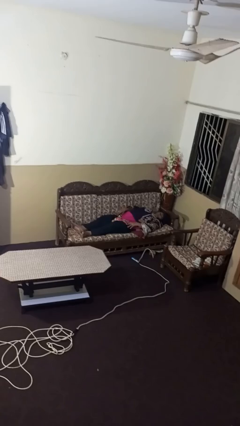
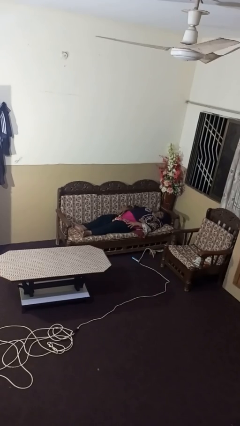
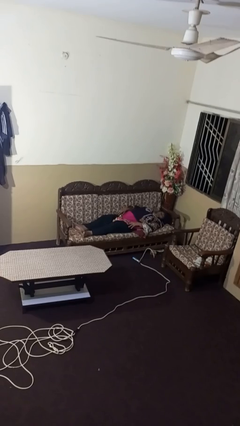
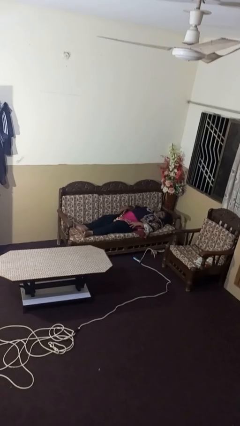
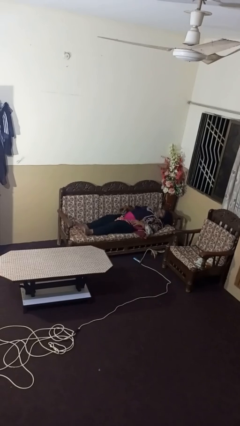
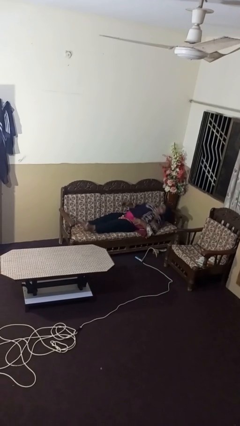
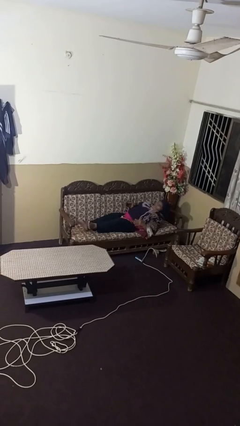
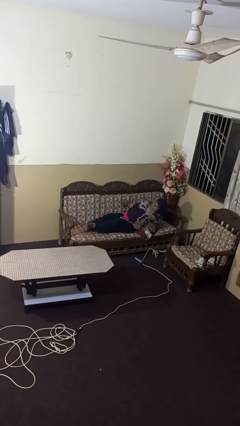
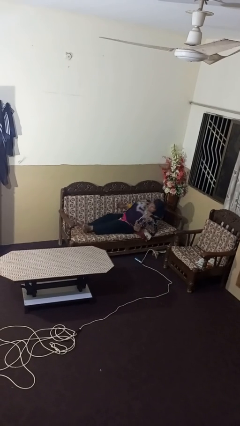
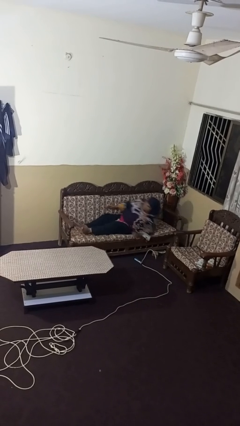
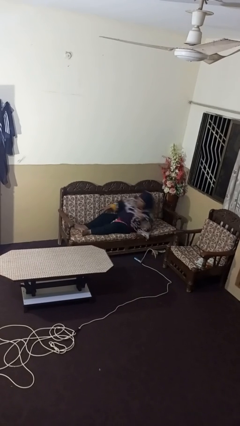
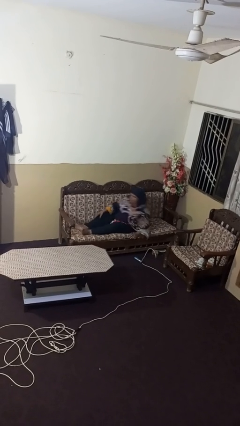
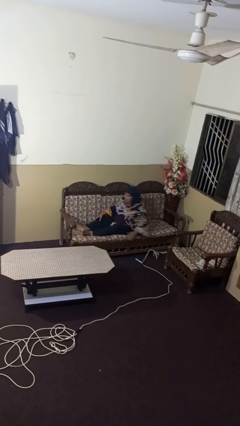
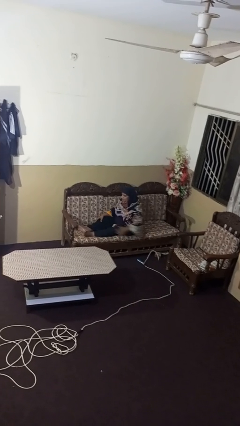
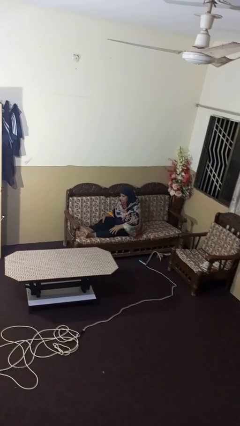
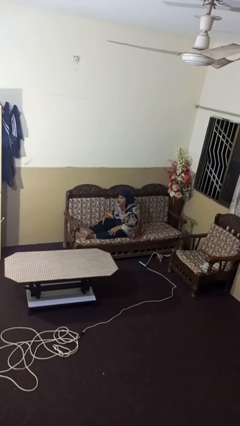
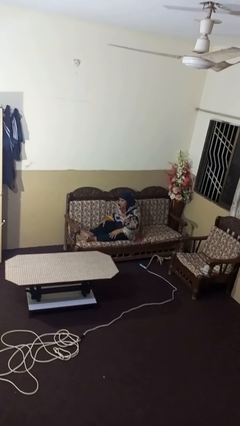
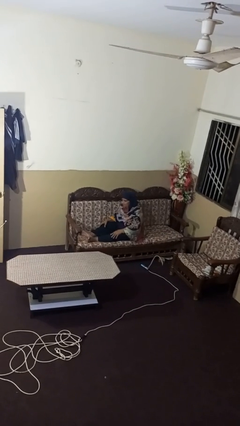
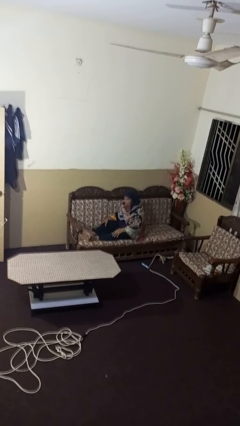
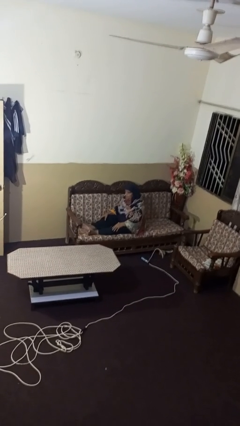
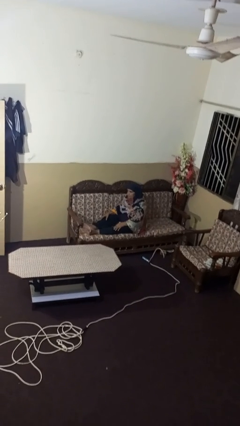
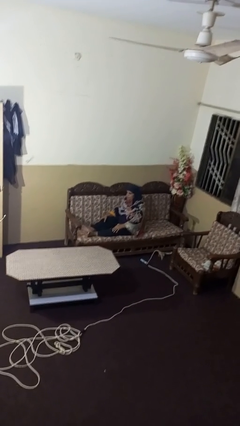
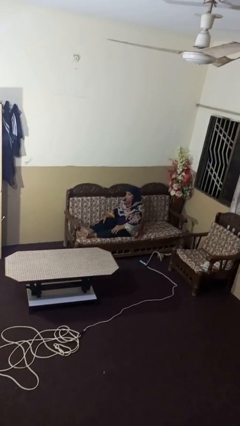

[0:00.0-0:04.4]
person stands up

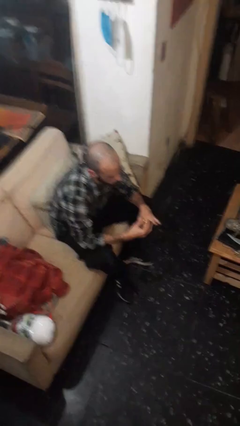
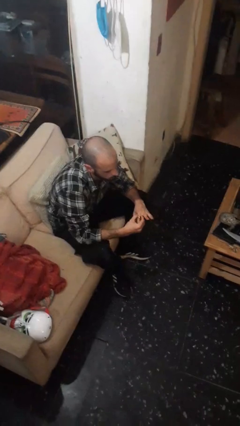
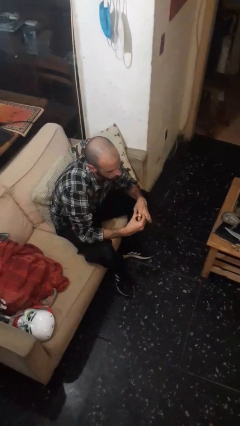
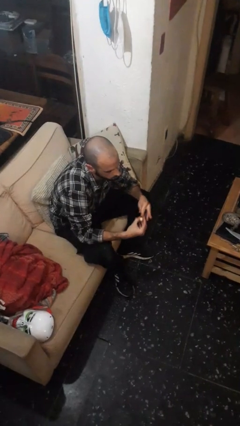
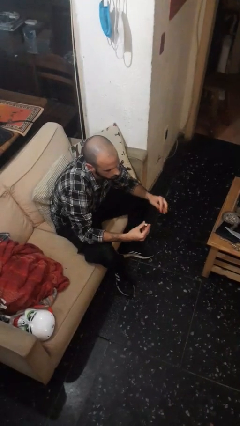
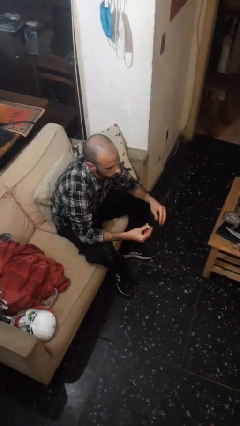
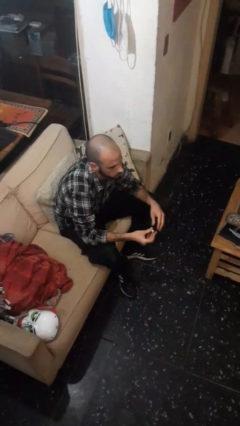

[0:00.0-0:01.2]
person takes off ring

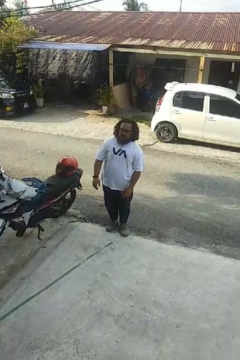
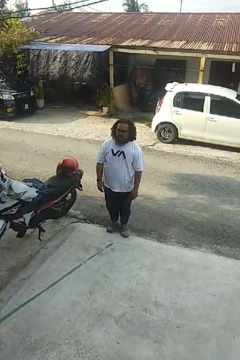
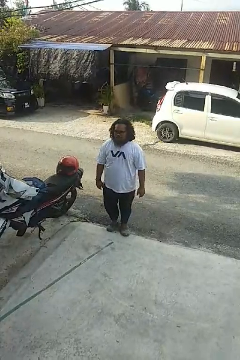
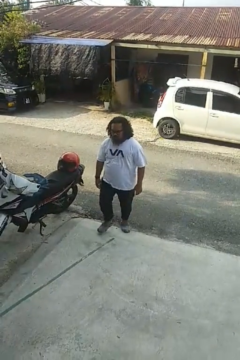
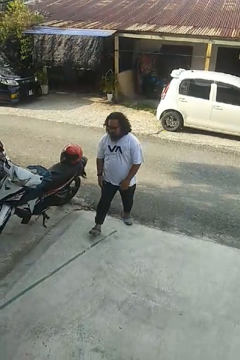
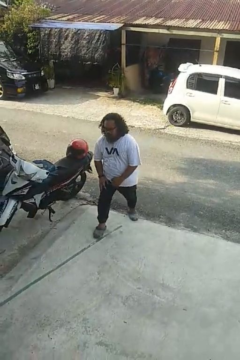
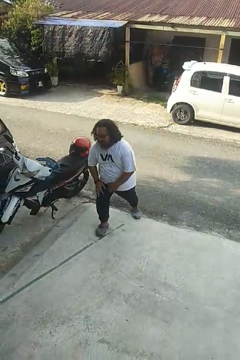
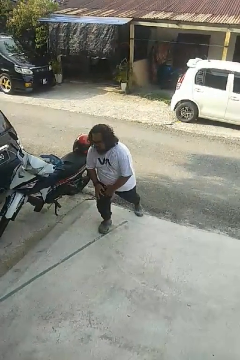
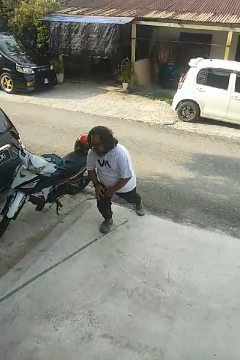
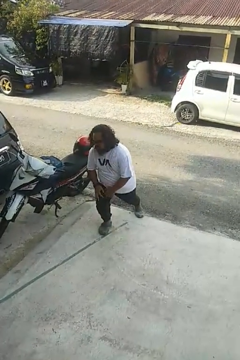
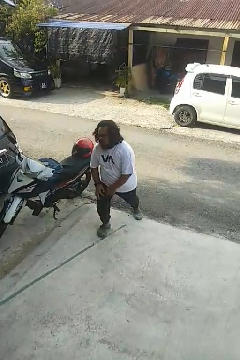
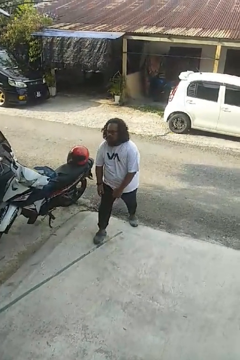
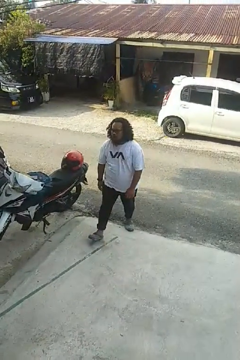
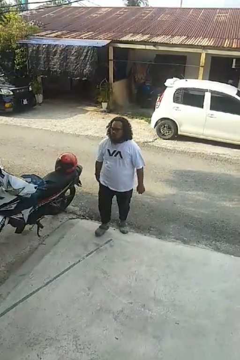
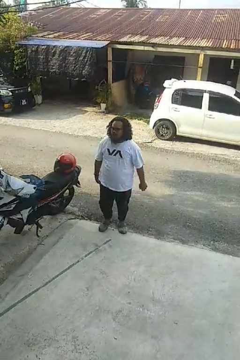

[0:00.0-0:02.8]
person exercises with lunges

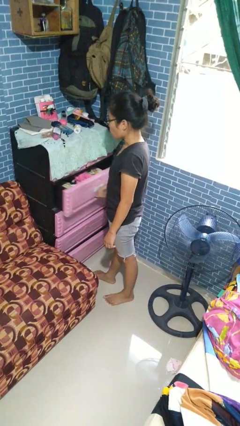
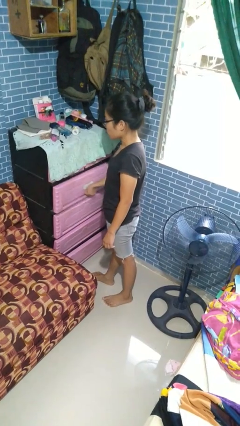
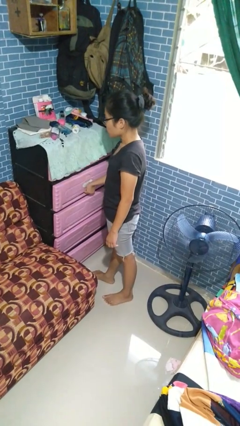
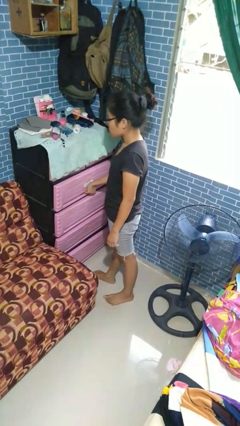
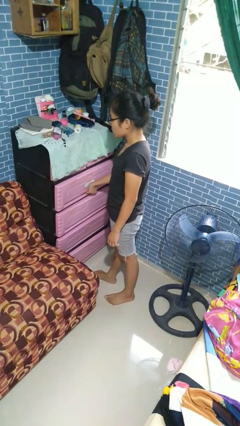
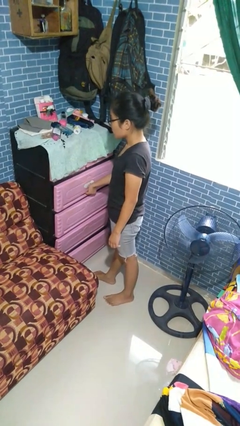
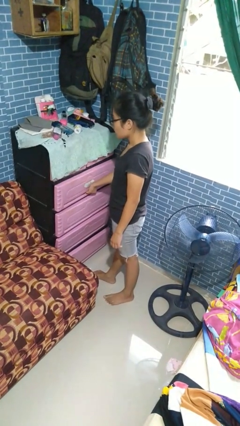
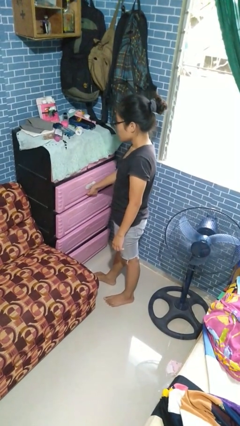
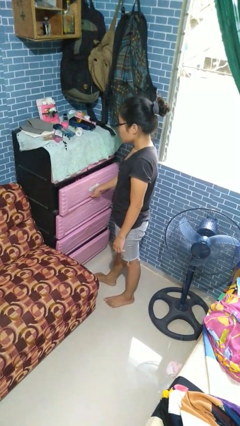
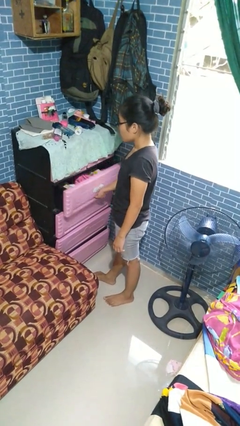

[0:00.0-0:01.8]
person closes dresser drawer

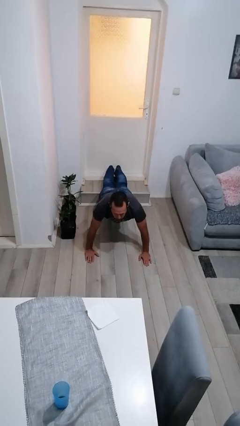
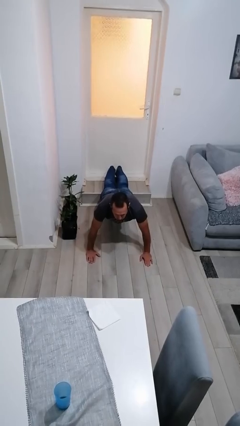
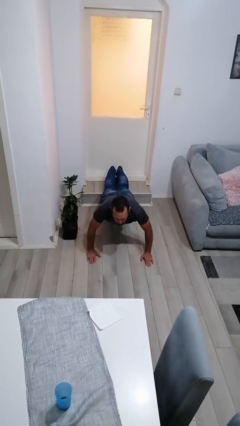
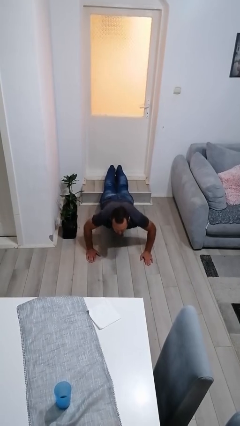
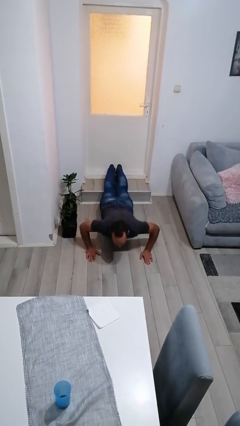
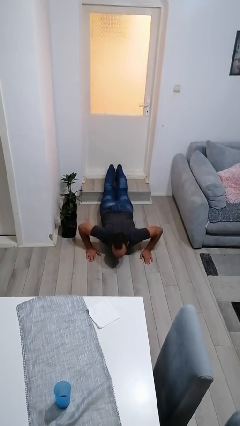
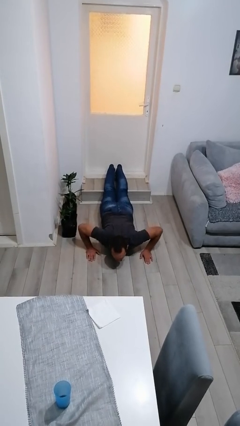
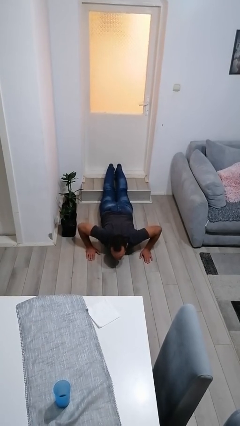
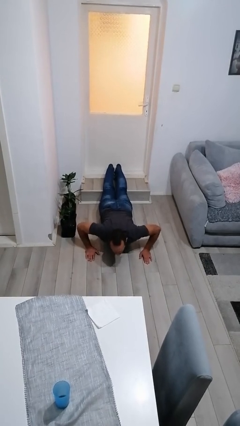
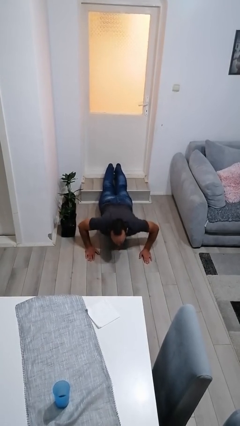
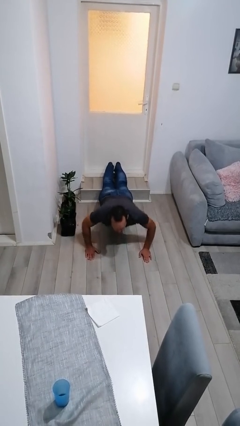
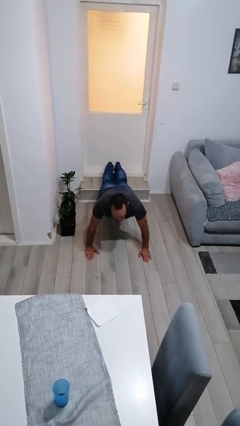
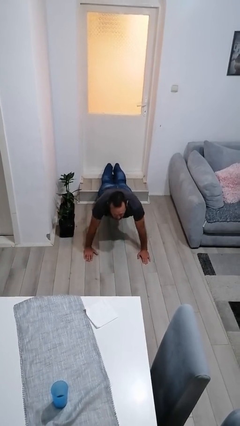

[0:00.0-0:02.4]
person exercises with pushup

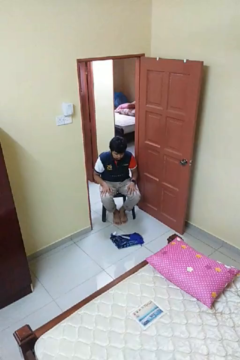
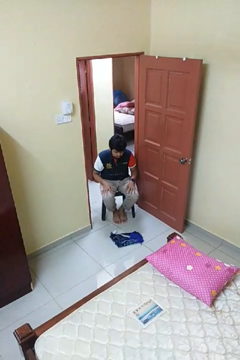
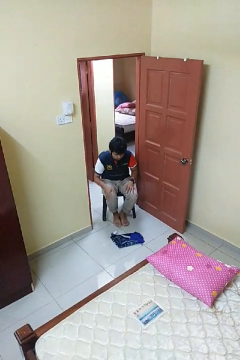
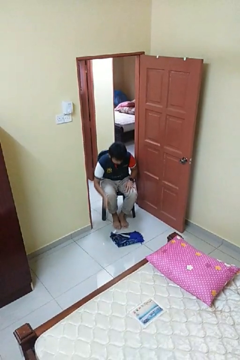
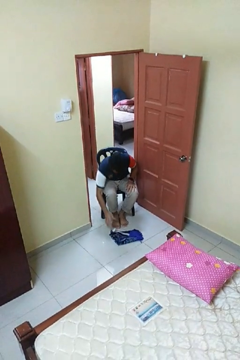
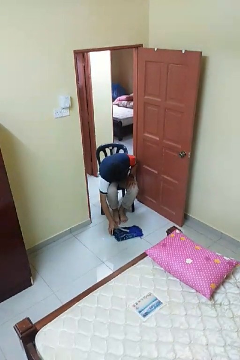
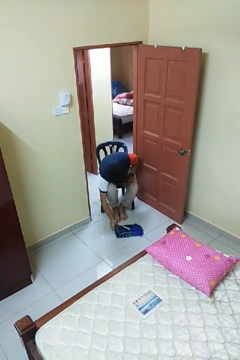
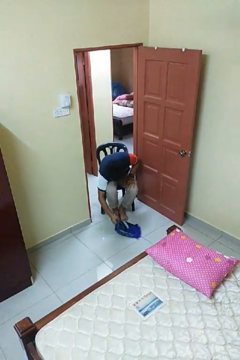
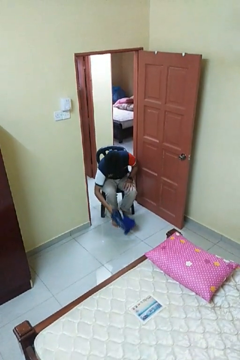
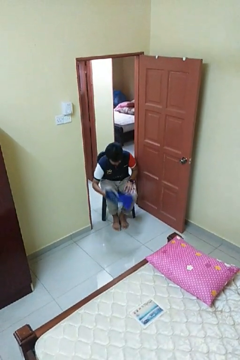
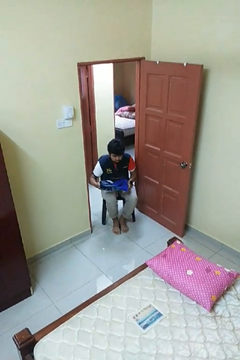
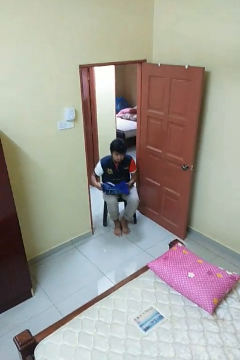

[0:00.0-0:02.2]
person picks up object from floor

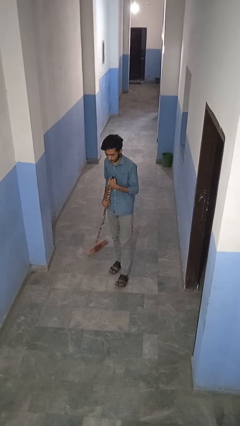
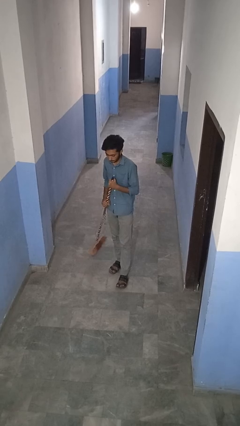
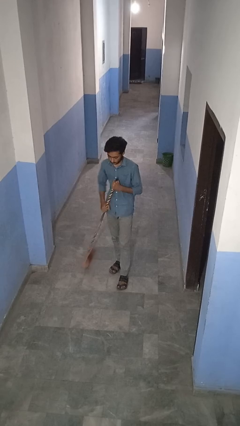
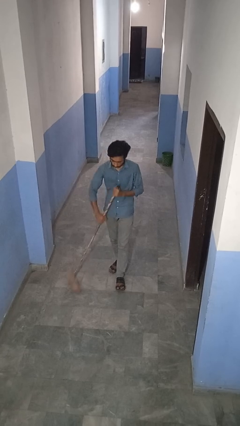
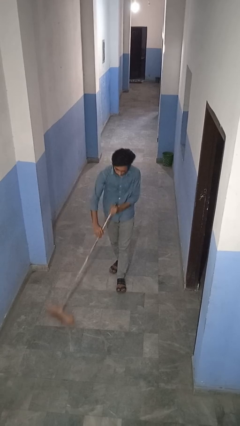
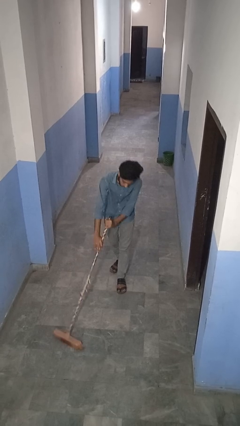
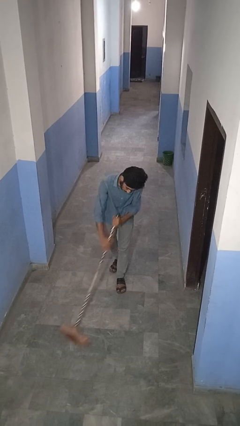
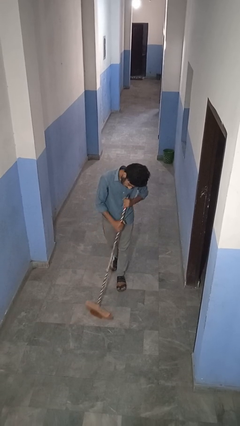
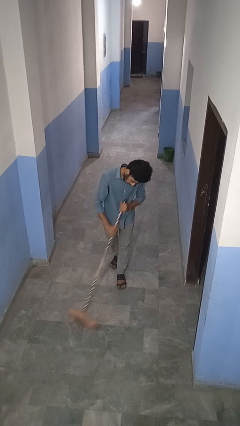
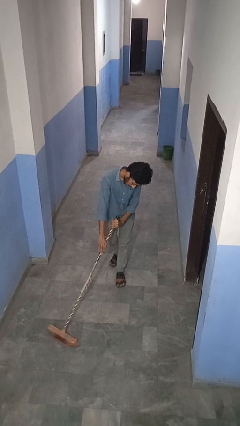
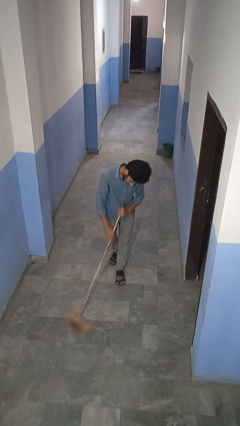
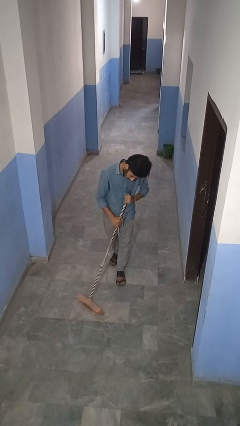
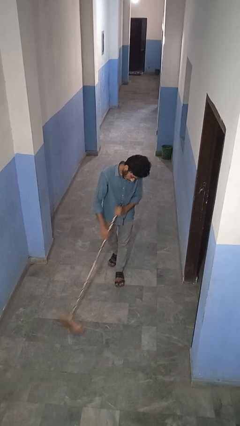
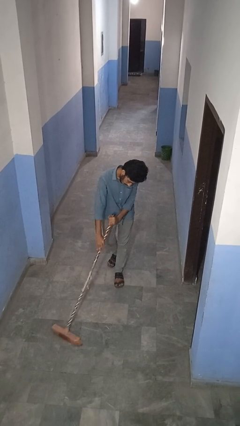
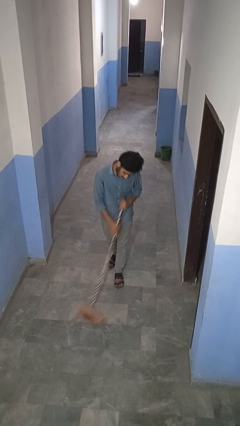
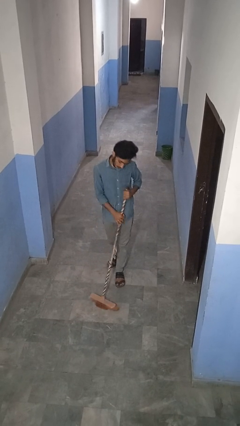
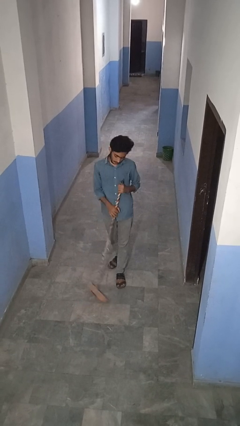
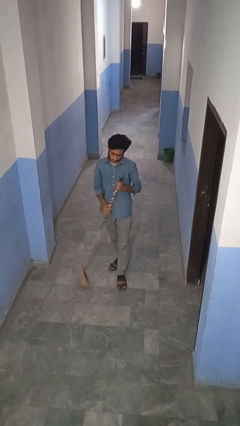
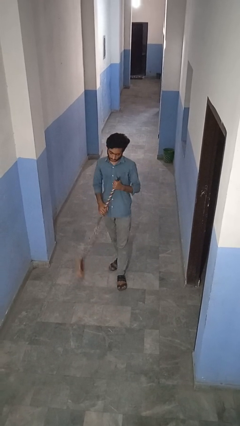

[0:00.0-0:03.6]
person sweeps floor
